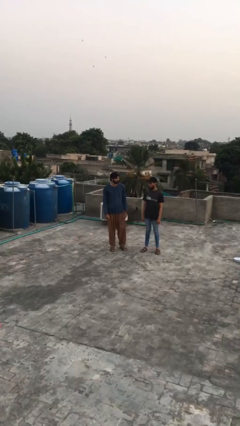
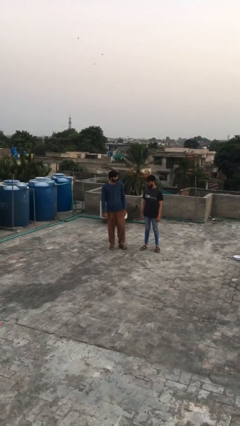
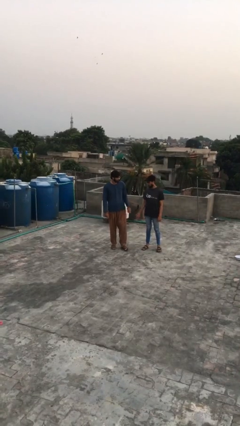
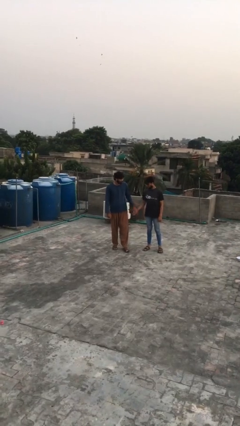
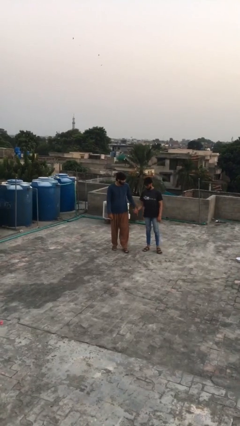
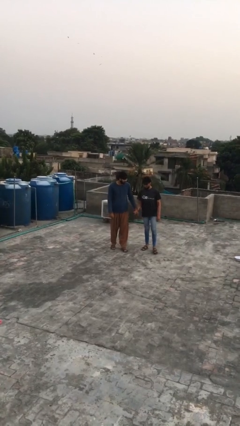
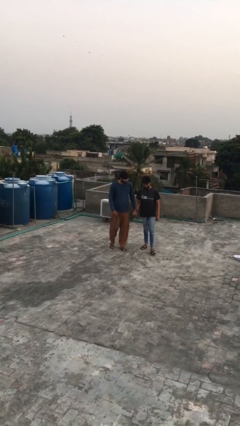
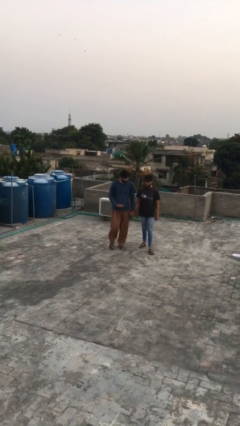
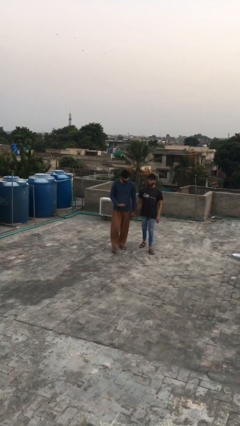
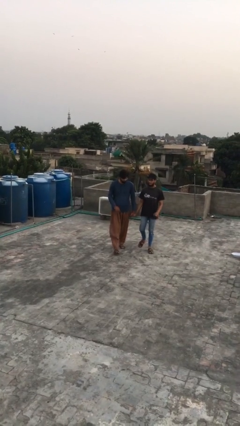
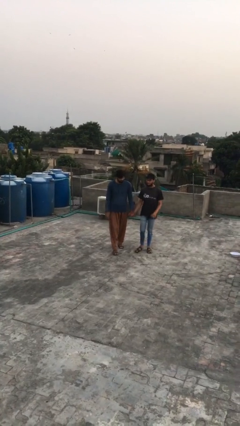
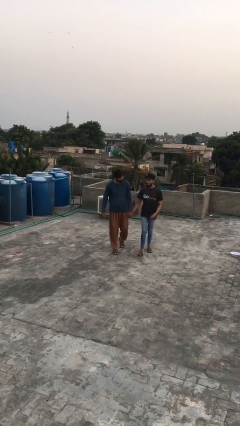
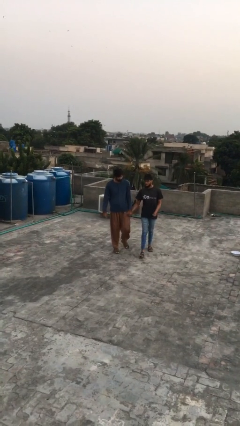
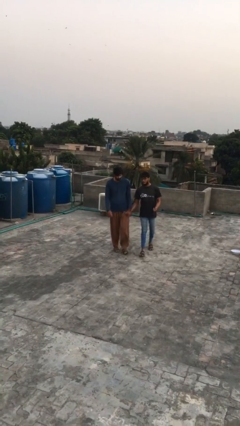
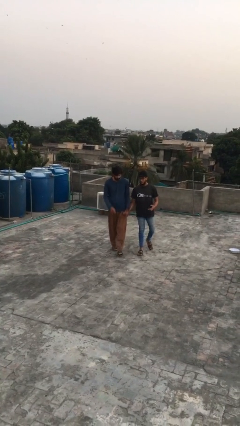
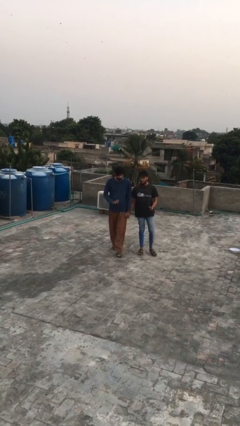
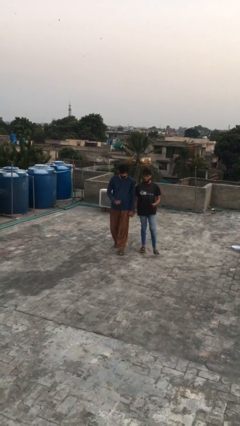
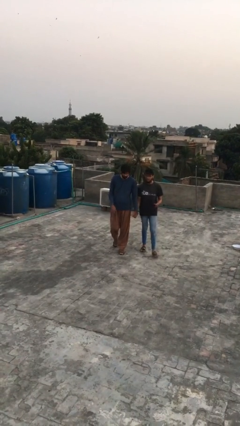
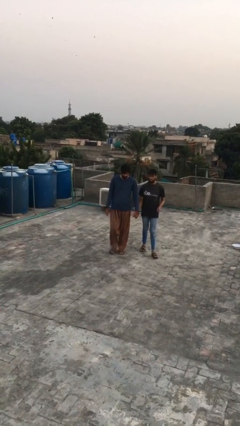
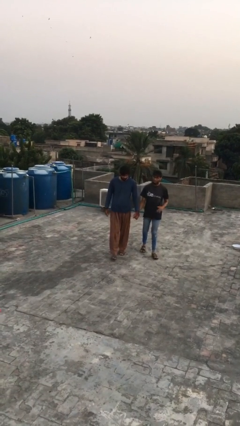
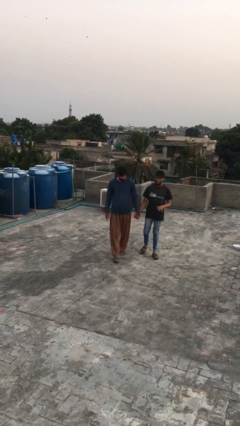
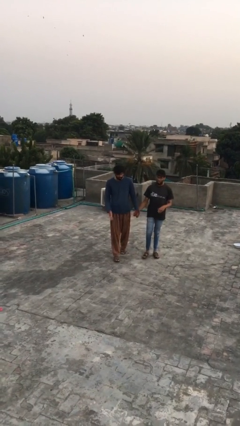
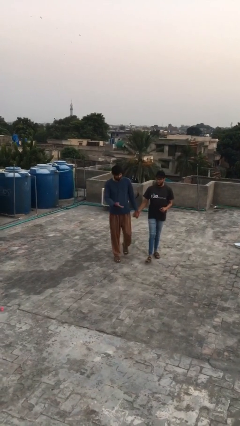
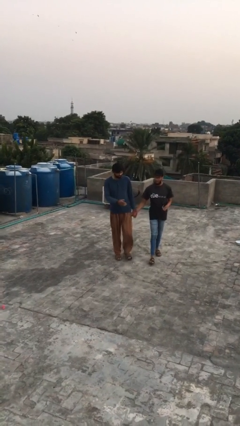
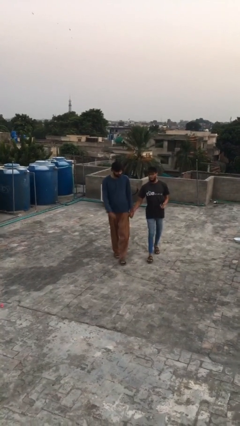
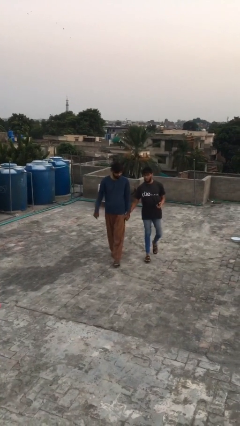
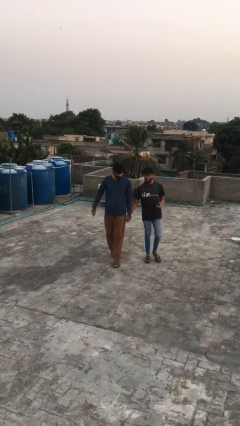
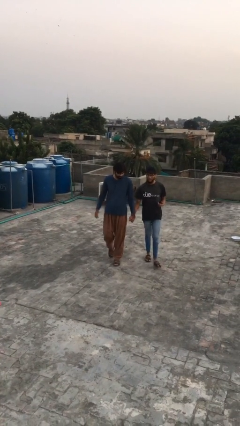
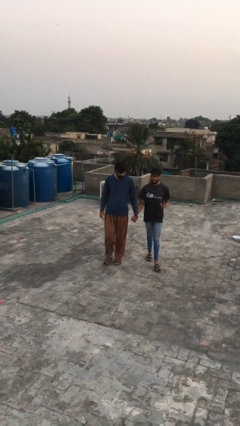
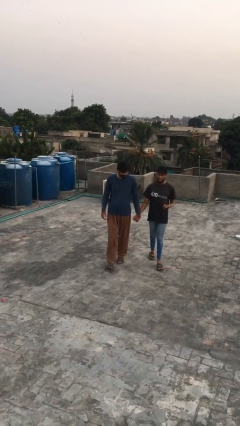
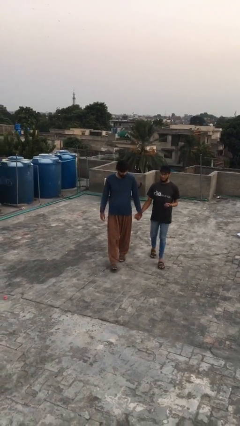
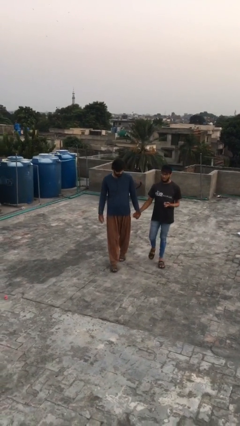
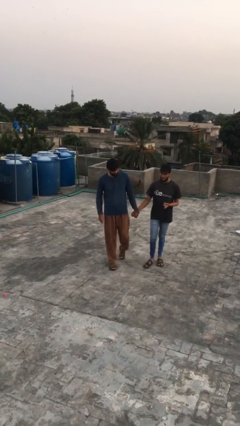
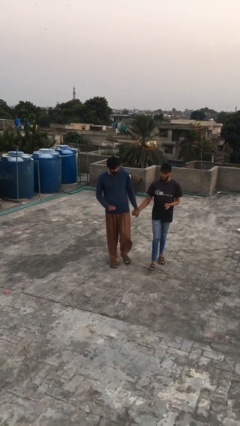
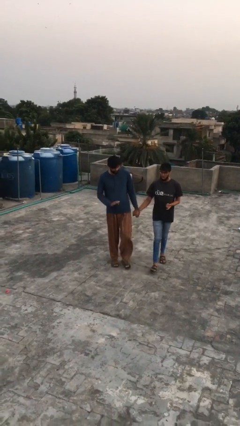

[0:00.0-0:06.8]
person holds hand

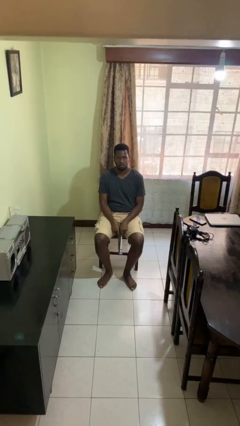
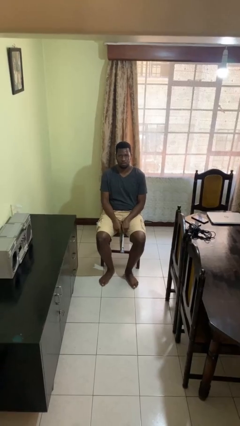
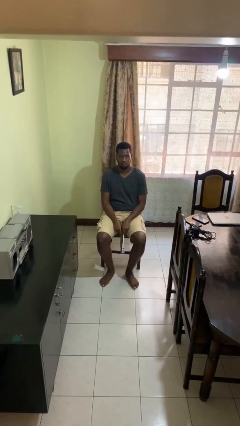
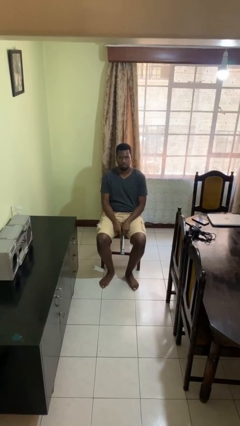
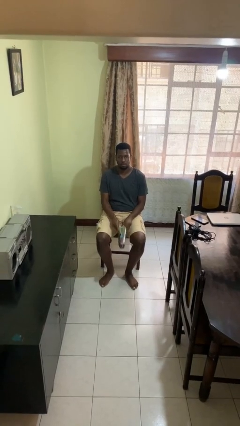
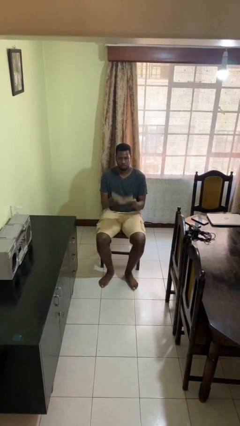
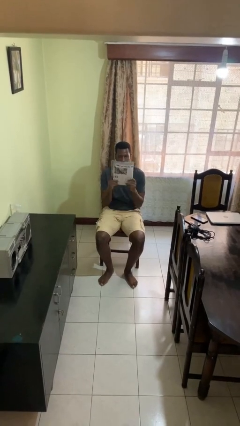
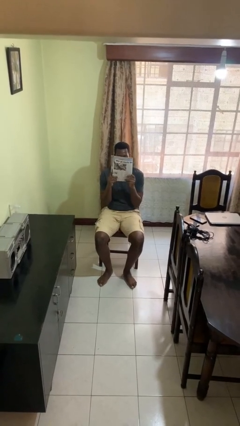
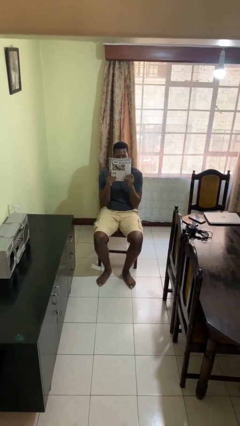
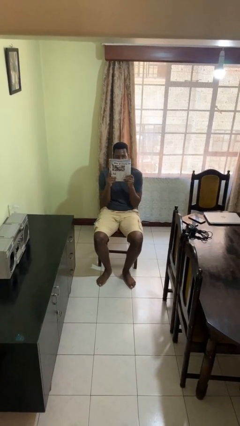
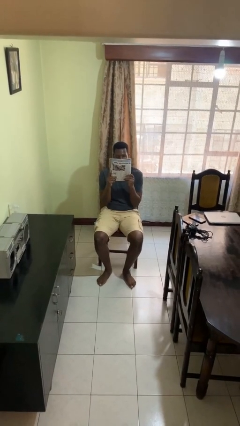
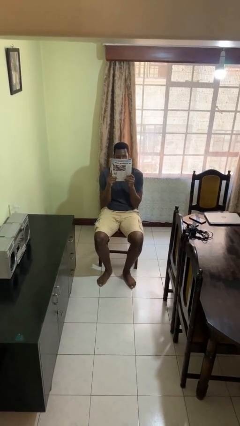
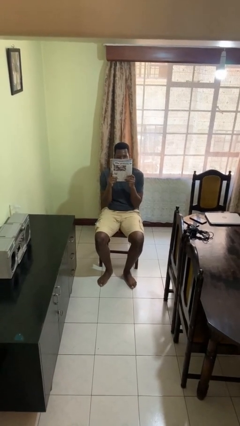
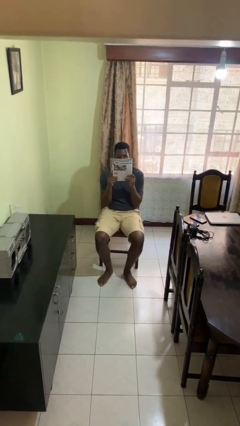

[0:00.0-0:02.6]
person reads document

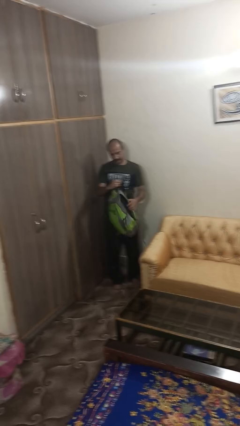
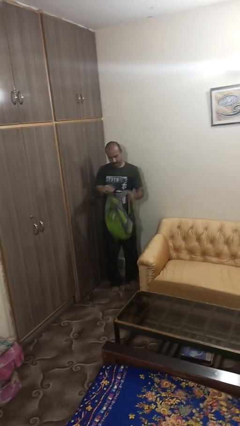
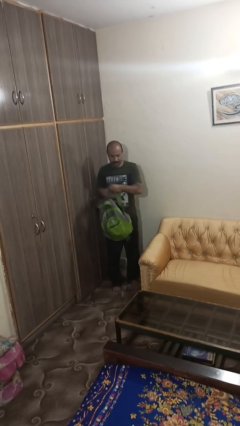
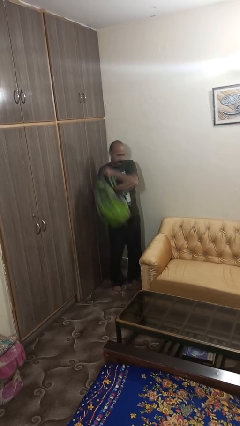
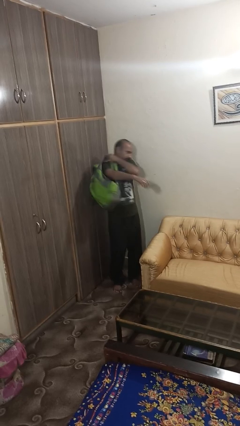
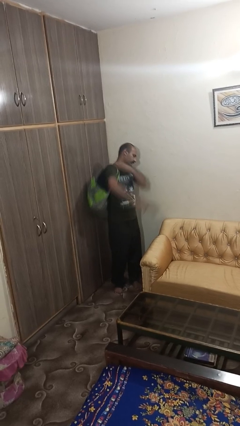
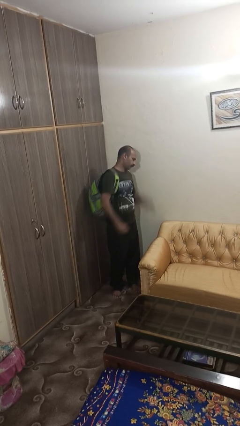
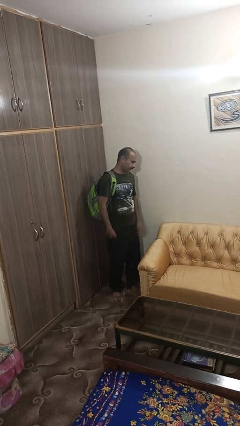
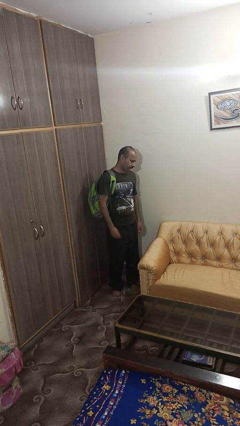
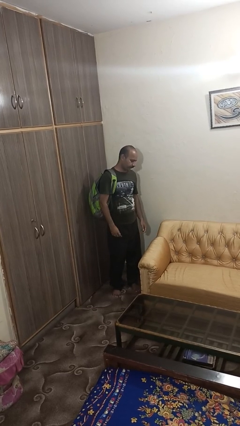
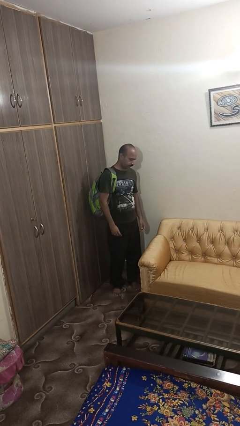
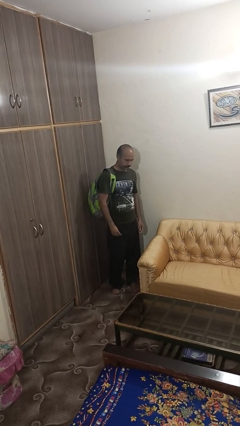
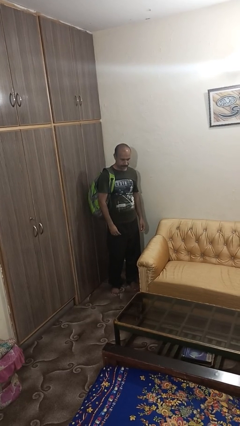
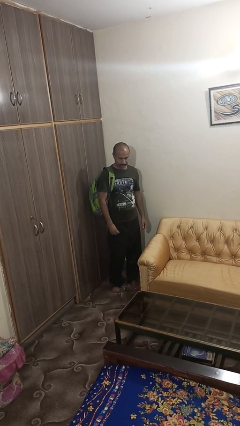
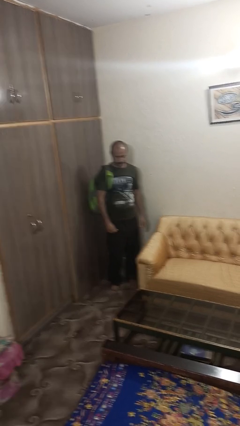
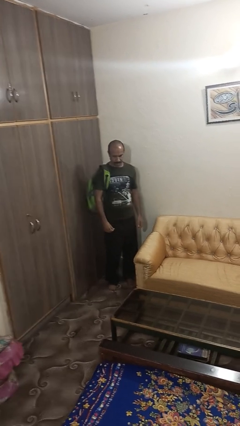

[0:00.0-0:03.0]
person puts on backpack

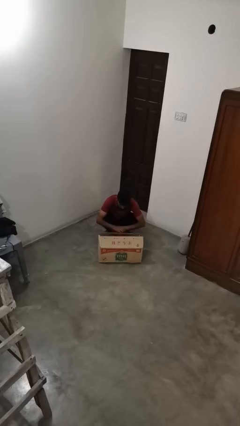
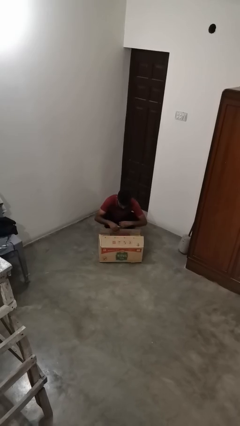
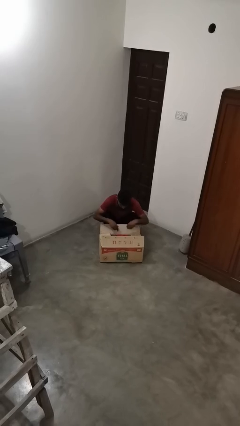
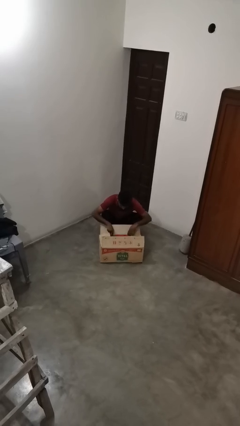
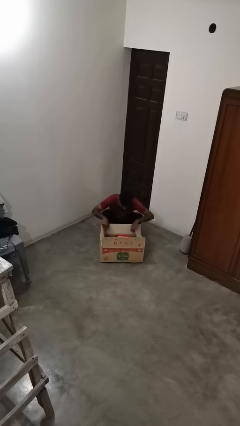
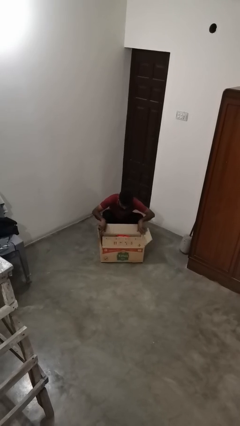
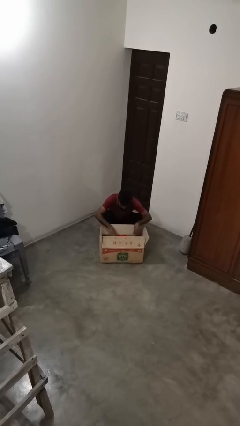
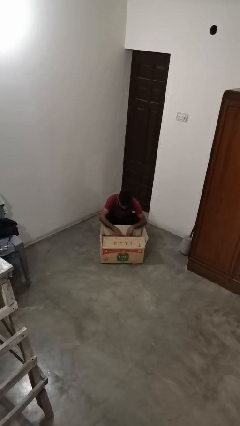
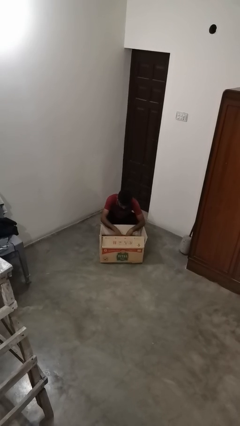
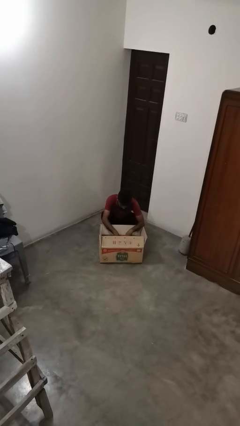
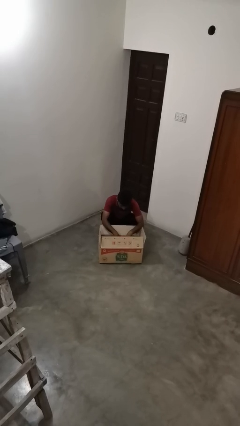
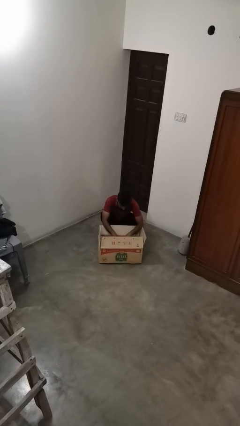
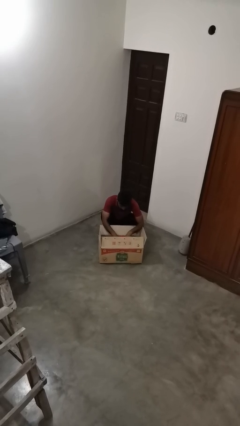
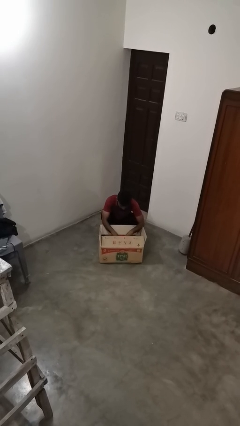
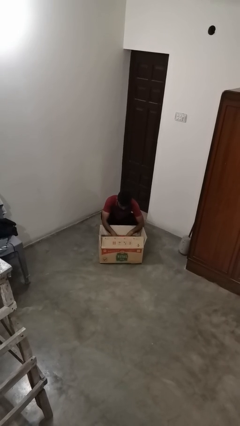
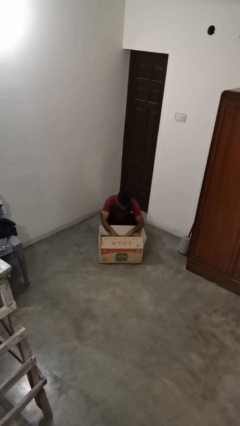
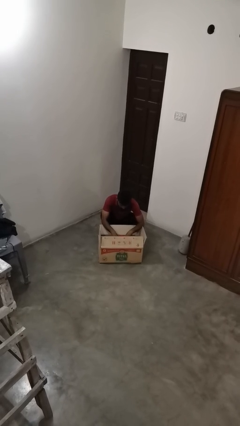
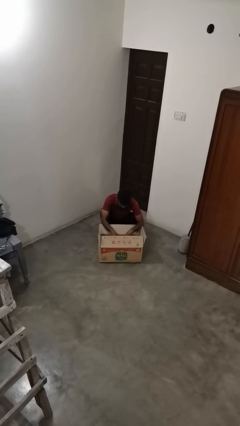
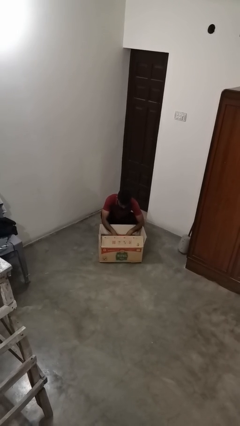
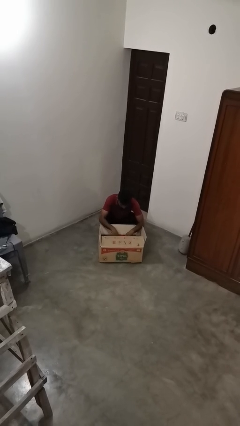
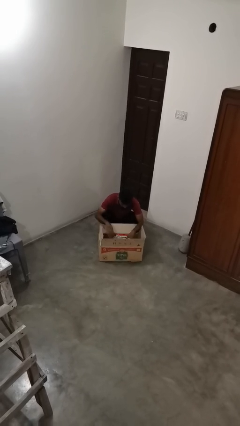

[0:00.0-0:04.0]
person searches in box

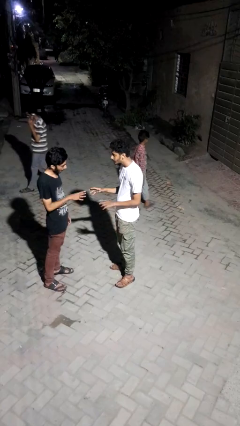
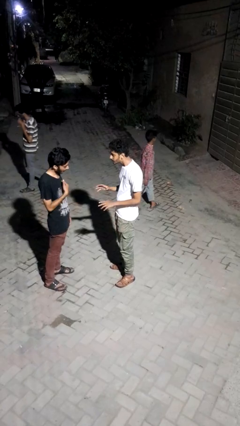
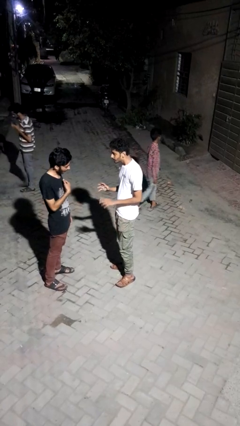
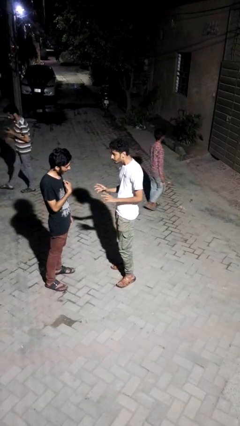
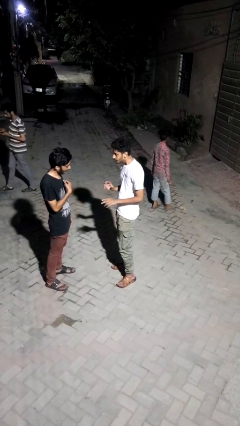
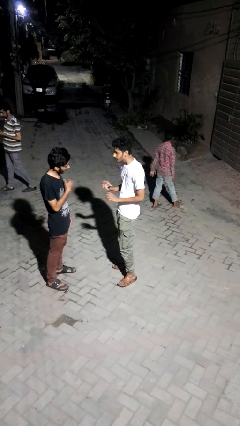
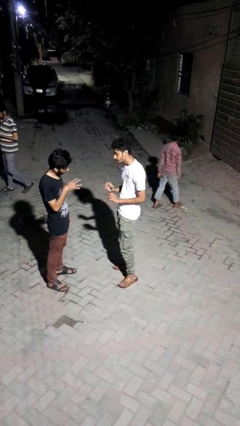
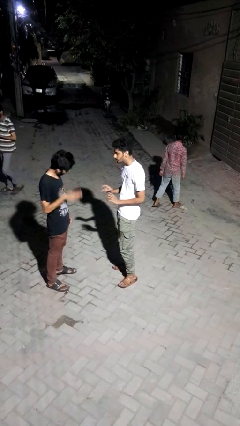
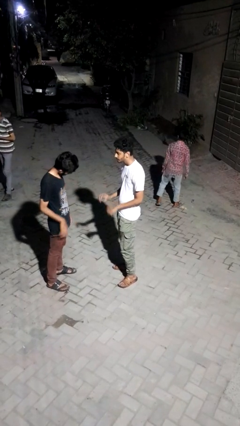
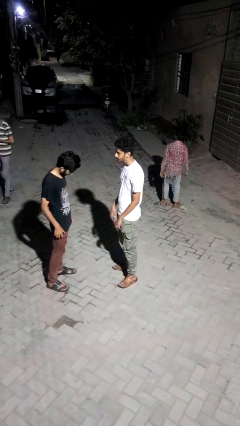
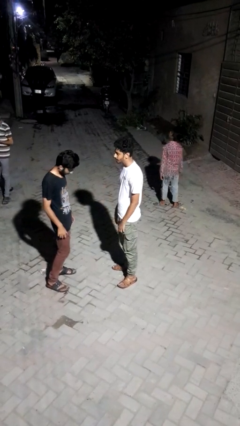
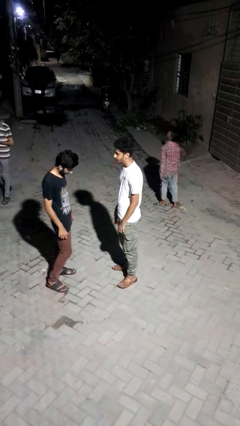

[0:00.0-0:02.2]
person talks to person
